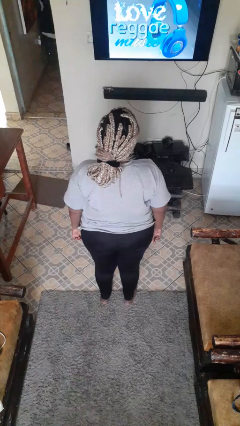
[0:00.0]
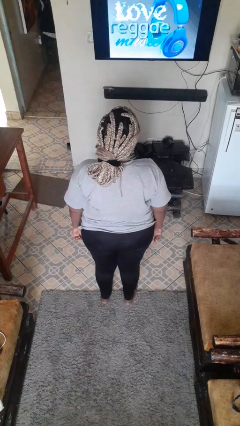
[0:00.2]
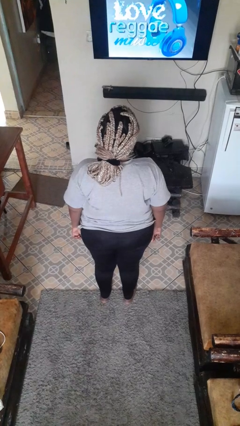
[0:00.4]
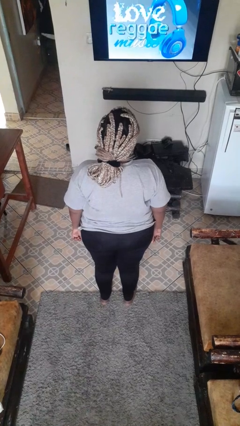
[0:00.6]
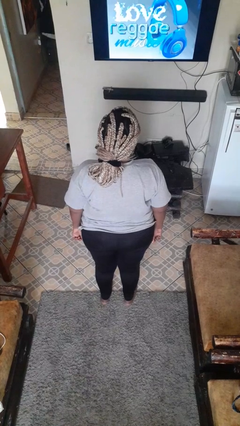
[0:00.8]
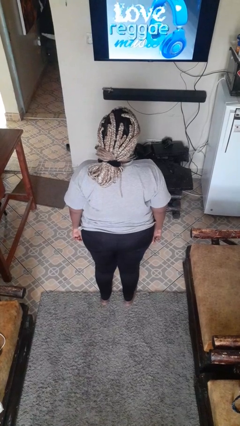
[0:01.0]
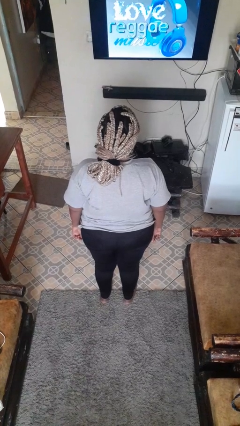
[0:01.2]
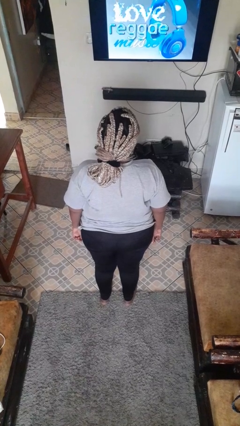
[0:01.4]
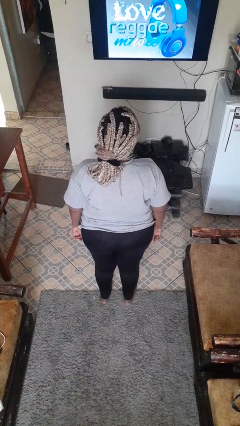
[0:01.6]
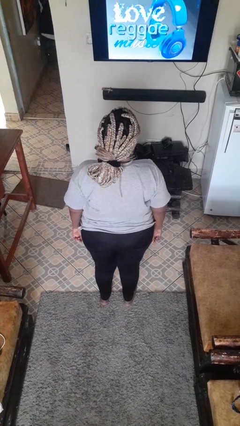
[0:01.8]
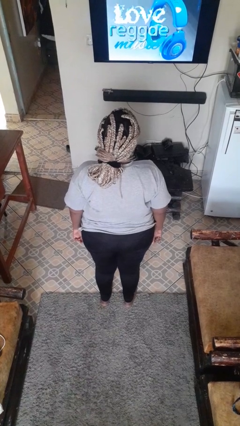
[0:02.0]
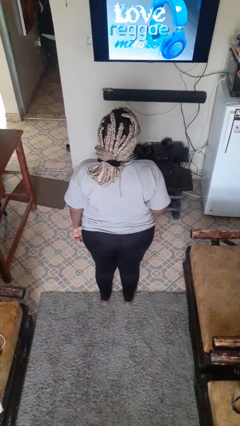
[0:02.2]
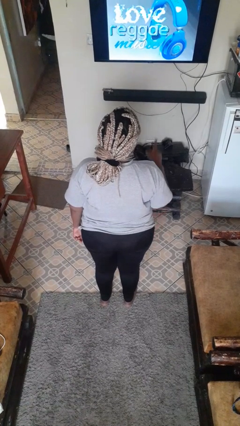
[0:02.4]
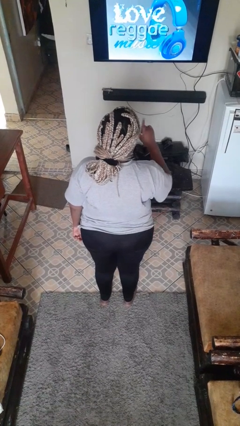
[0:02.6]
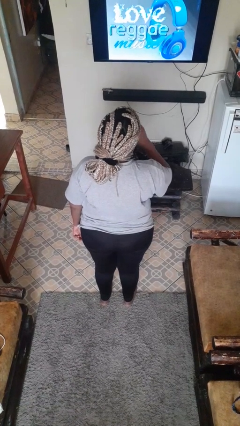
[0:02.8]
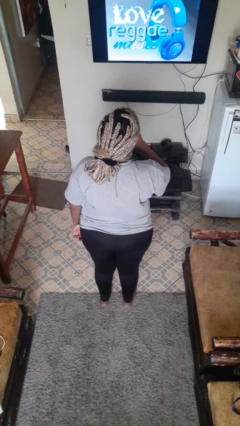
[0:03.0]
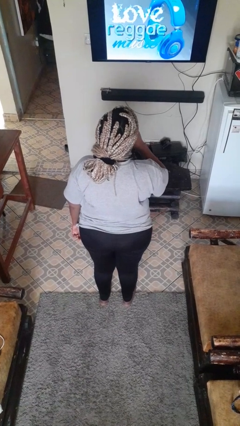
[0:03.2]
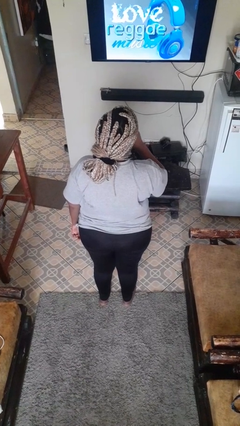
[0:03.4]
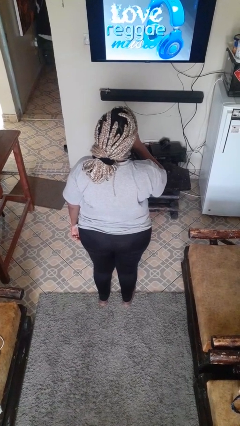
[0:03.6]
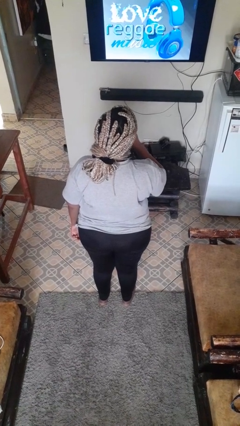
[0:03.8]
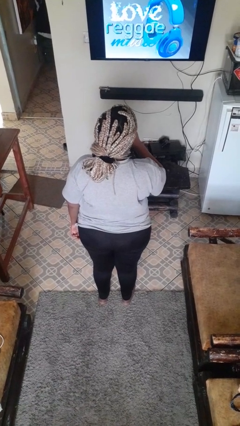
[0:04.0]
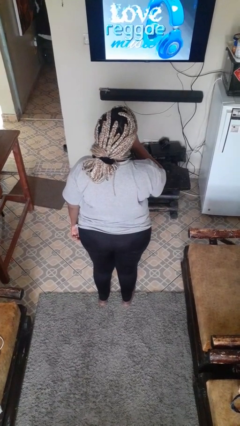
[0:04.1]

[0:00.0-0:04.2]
person gestures be quiet

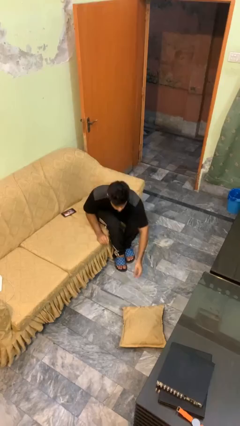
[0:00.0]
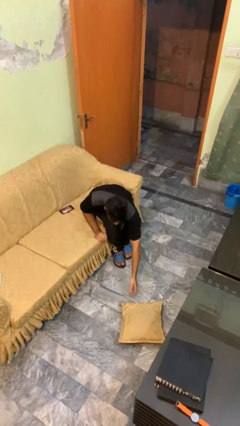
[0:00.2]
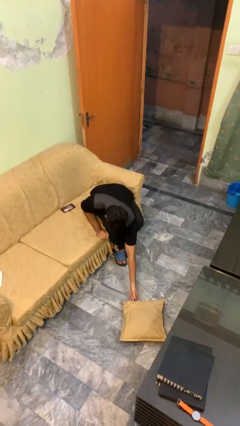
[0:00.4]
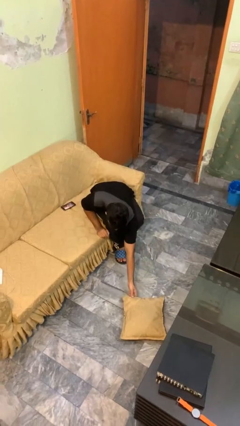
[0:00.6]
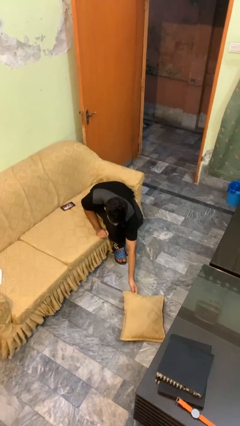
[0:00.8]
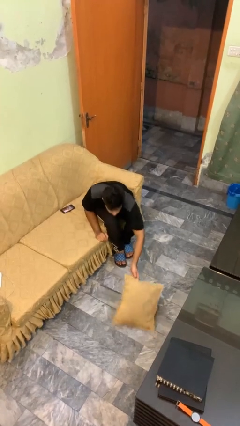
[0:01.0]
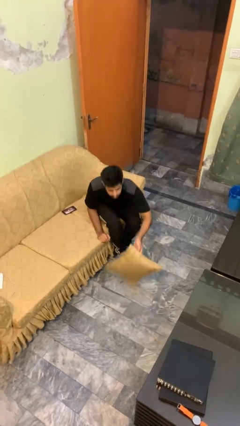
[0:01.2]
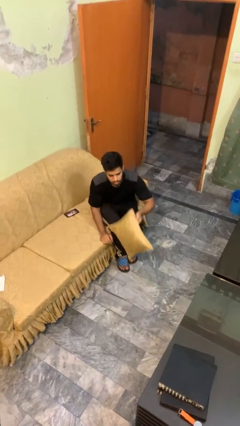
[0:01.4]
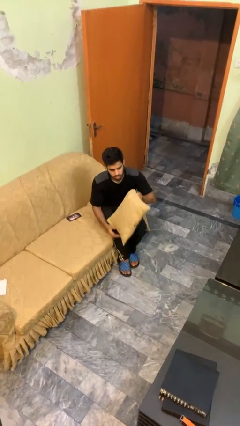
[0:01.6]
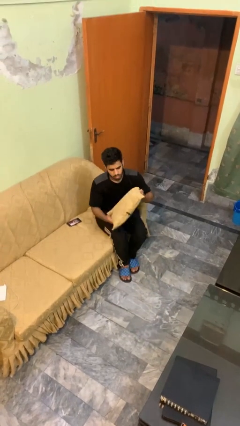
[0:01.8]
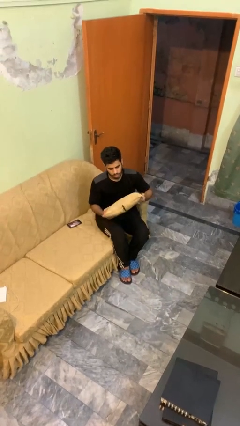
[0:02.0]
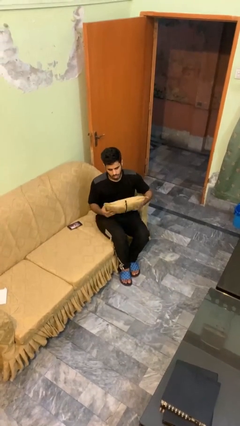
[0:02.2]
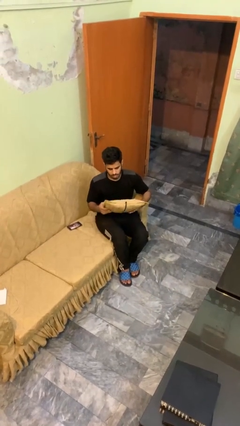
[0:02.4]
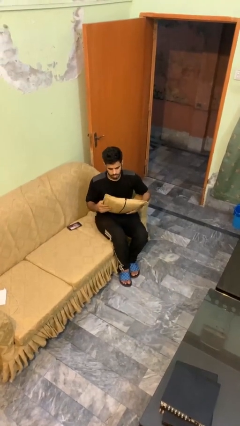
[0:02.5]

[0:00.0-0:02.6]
person picks up object from floor

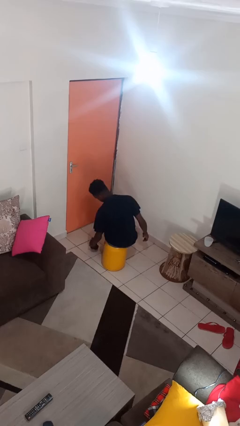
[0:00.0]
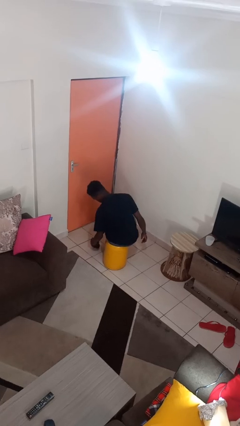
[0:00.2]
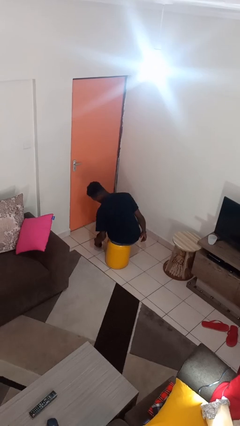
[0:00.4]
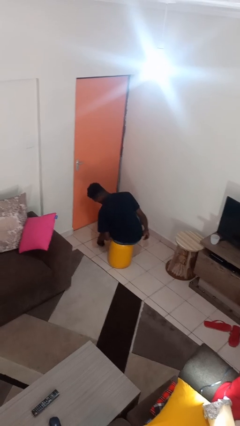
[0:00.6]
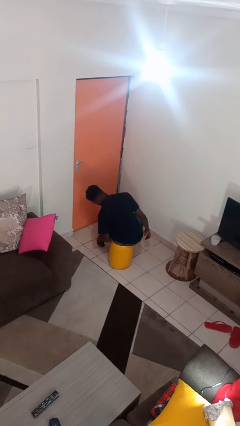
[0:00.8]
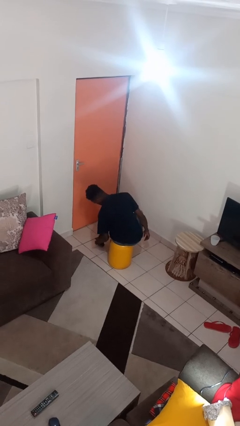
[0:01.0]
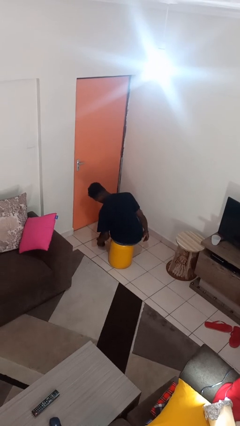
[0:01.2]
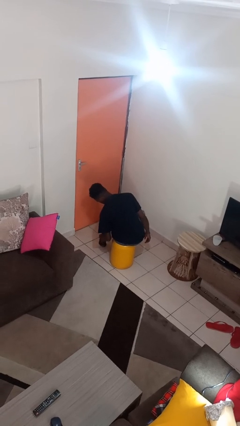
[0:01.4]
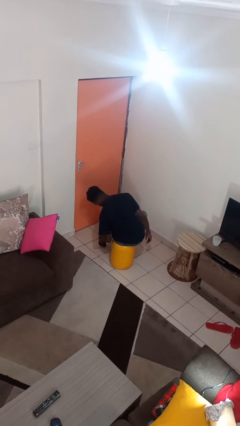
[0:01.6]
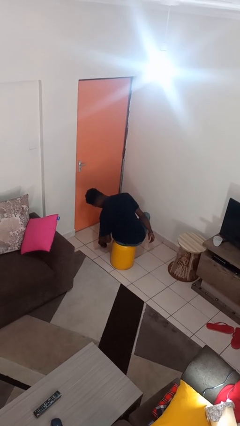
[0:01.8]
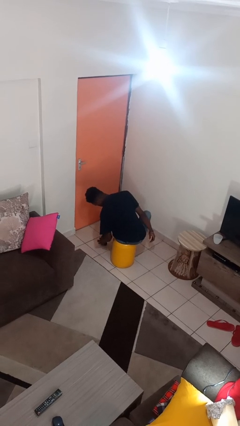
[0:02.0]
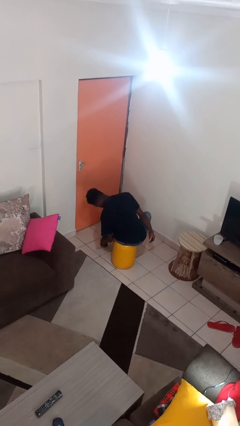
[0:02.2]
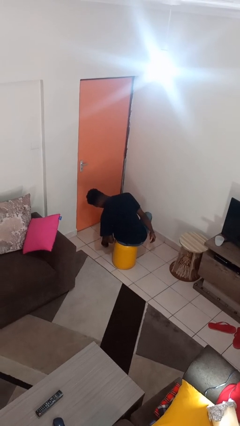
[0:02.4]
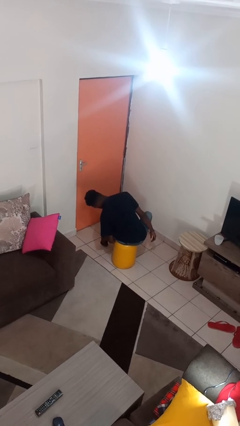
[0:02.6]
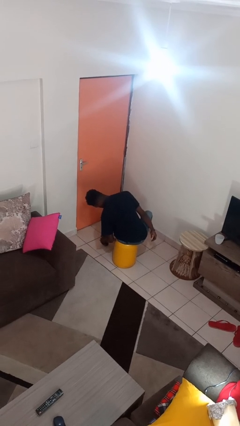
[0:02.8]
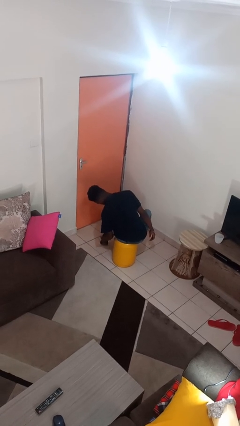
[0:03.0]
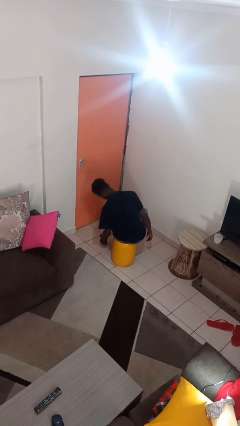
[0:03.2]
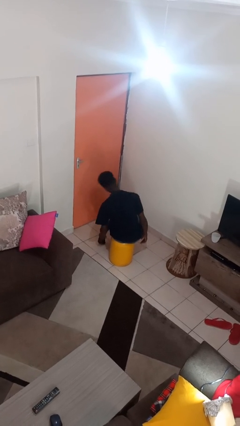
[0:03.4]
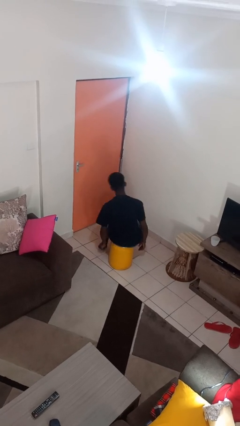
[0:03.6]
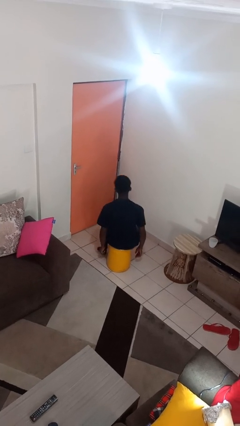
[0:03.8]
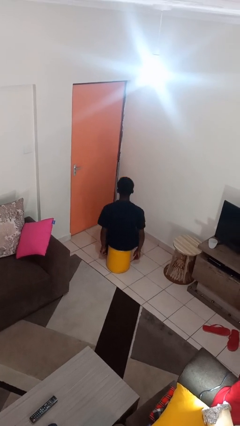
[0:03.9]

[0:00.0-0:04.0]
person rubs foot

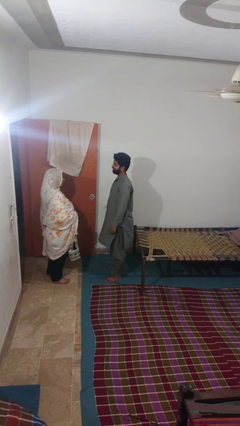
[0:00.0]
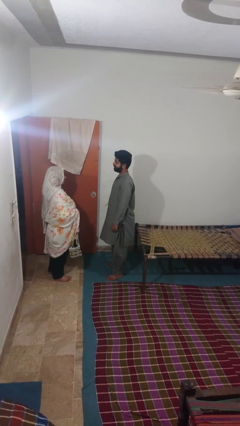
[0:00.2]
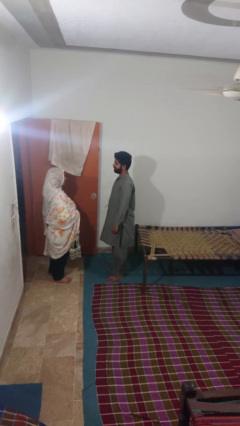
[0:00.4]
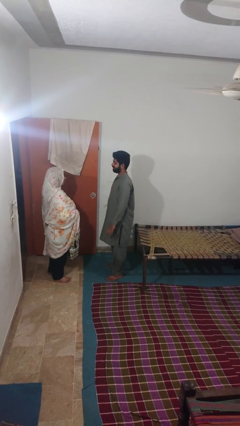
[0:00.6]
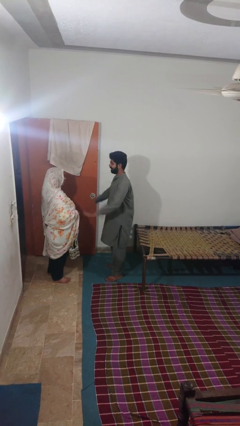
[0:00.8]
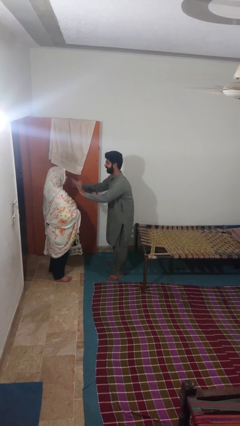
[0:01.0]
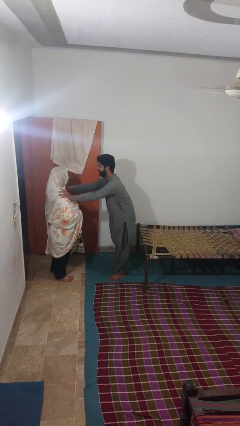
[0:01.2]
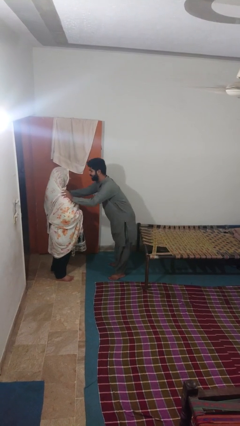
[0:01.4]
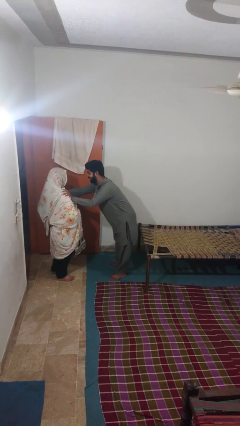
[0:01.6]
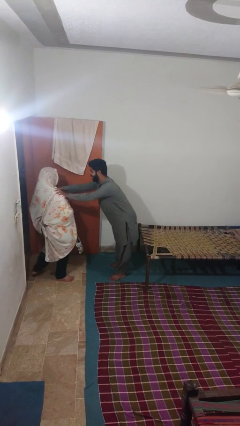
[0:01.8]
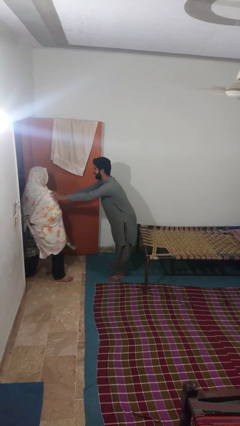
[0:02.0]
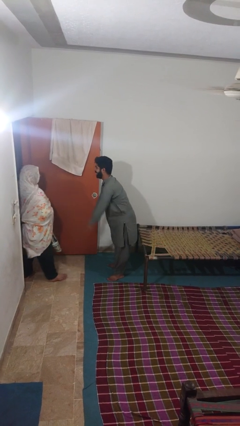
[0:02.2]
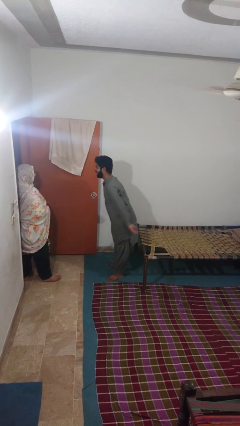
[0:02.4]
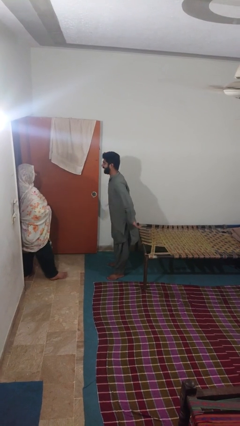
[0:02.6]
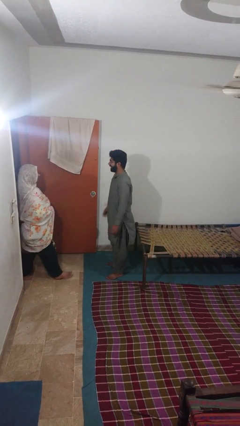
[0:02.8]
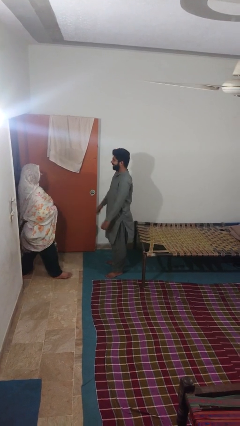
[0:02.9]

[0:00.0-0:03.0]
person shoves person

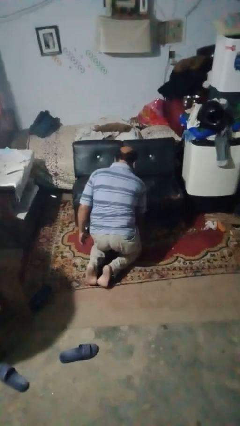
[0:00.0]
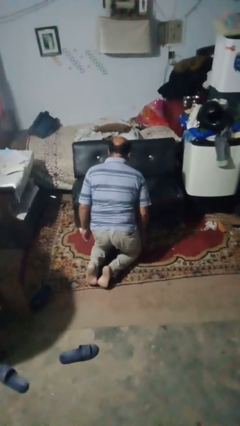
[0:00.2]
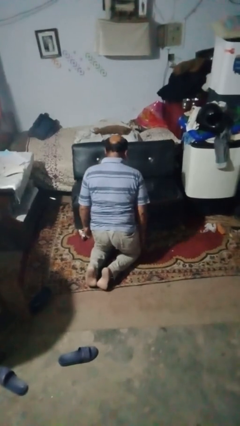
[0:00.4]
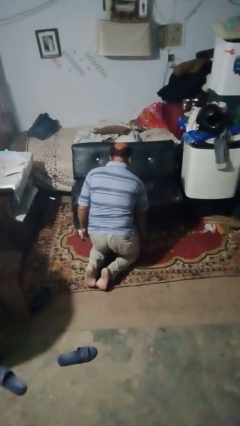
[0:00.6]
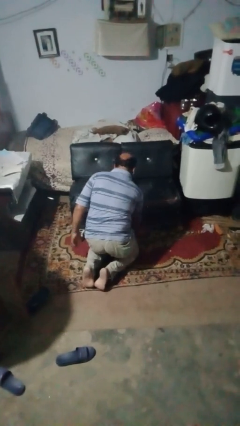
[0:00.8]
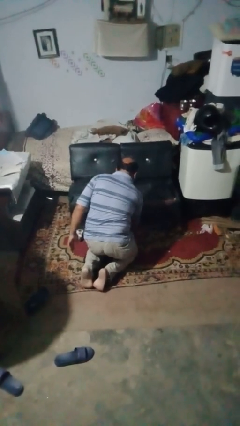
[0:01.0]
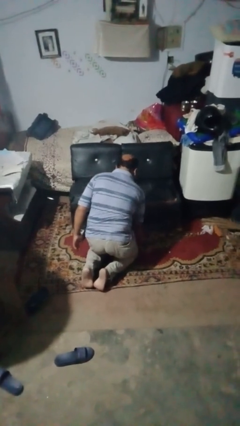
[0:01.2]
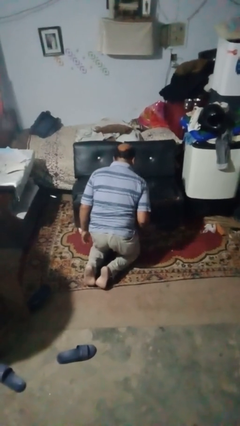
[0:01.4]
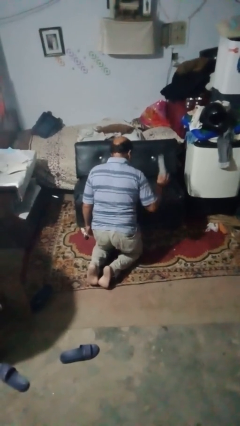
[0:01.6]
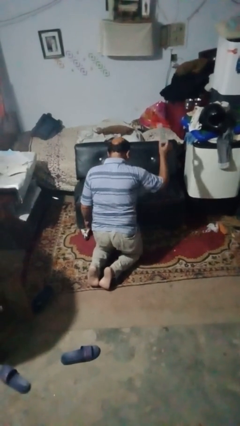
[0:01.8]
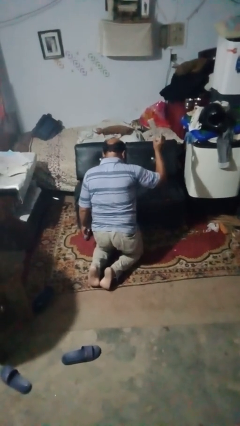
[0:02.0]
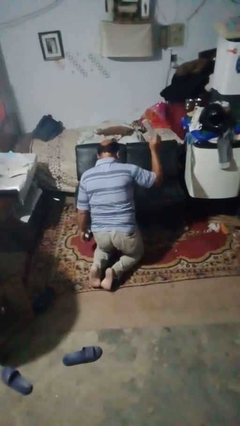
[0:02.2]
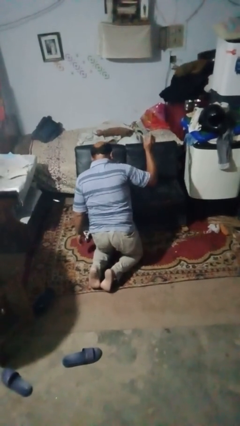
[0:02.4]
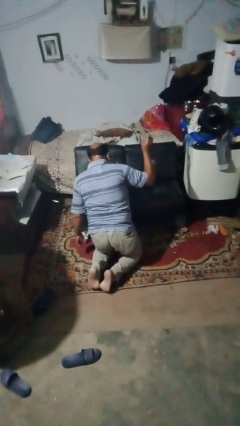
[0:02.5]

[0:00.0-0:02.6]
person searches under couch

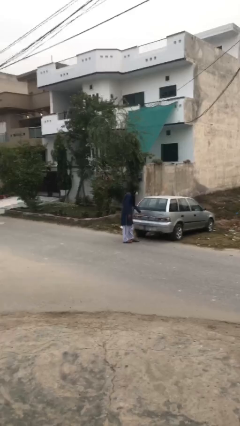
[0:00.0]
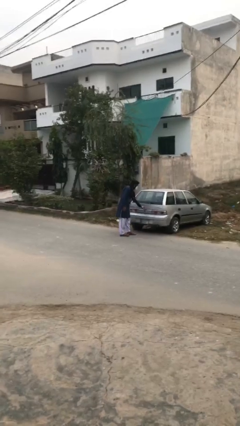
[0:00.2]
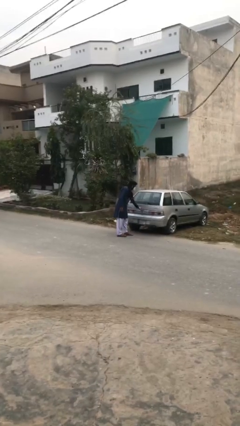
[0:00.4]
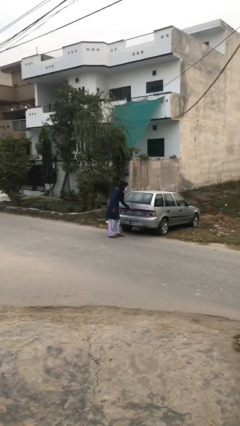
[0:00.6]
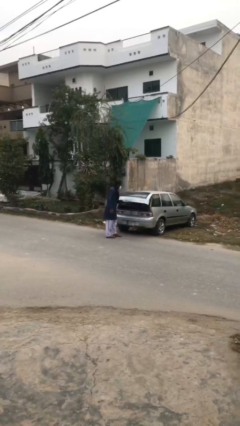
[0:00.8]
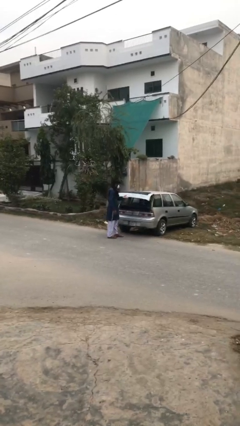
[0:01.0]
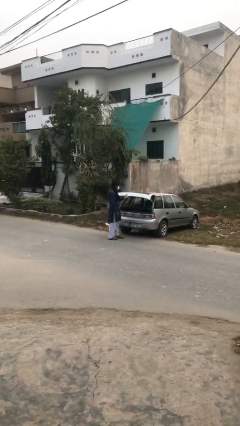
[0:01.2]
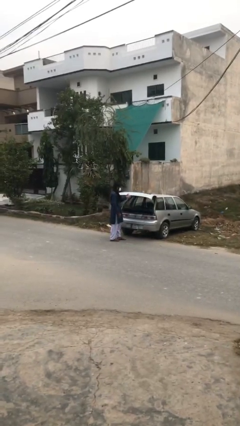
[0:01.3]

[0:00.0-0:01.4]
person opens car trunk
